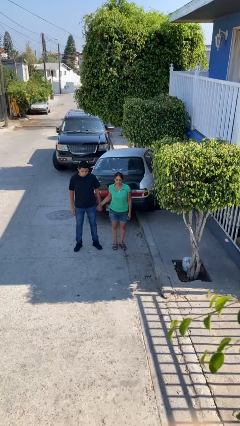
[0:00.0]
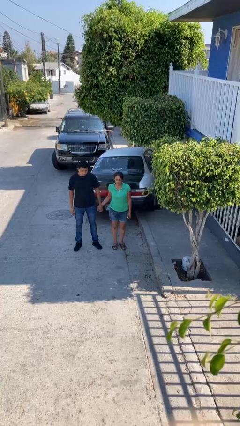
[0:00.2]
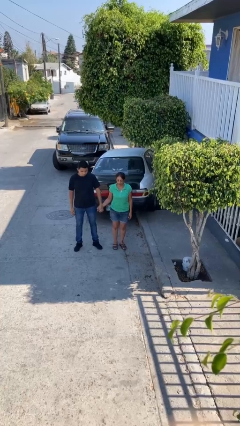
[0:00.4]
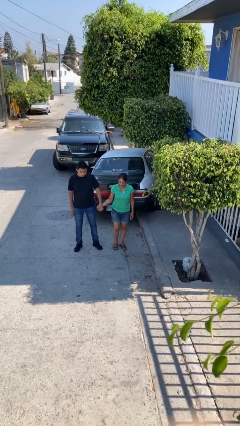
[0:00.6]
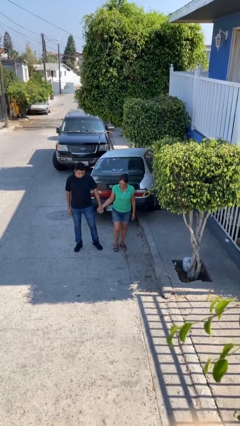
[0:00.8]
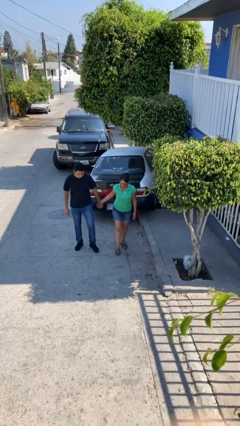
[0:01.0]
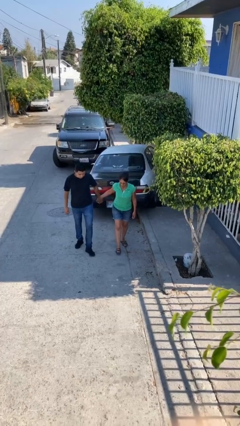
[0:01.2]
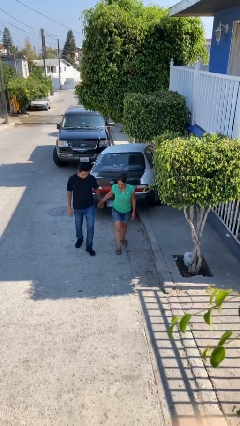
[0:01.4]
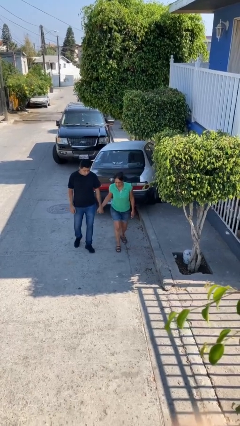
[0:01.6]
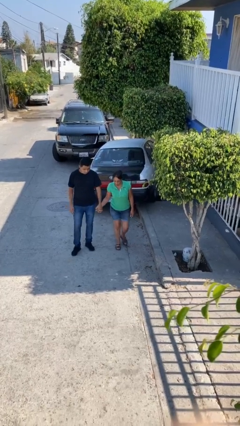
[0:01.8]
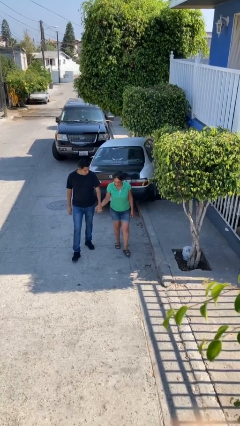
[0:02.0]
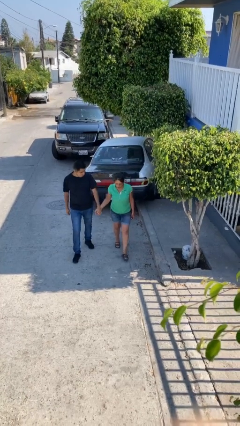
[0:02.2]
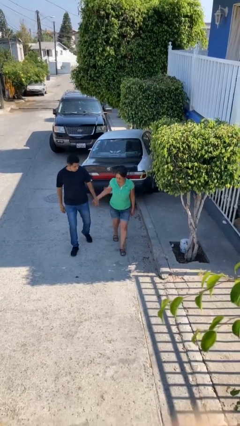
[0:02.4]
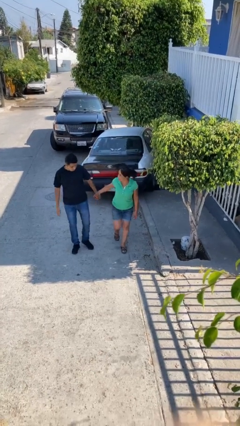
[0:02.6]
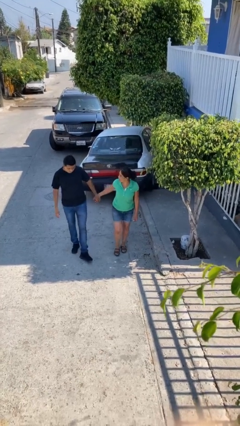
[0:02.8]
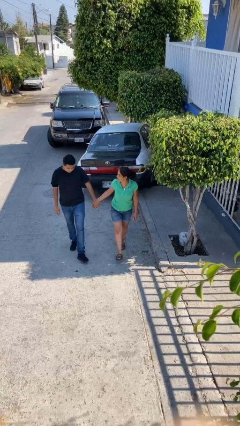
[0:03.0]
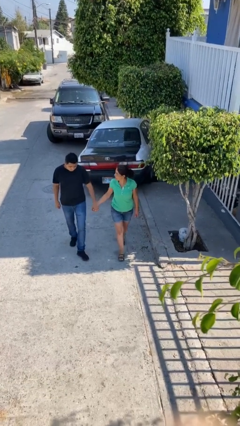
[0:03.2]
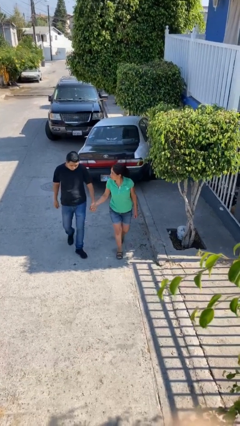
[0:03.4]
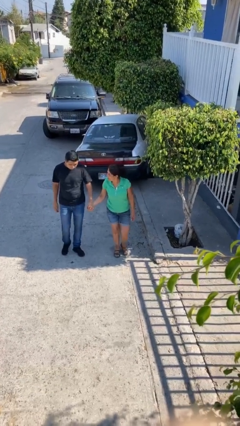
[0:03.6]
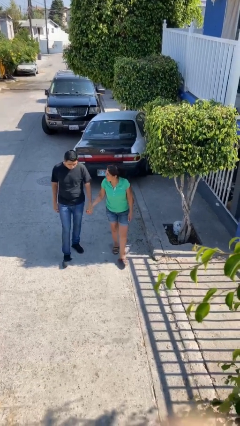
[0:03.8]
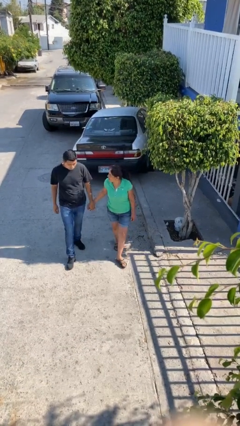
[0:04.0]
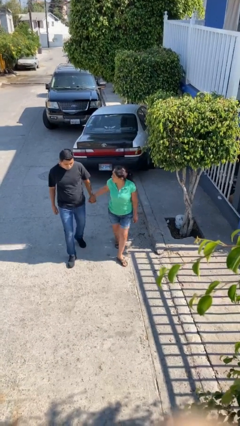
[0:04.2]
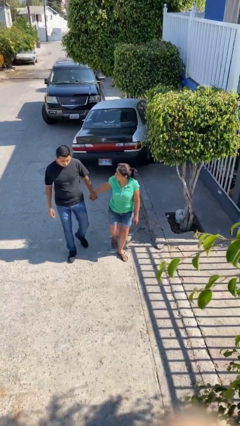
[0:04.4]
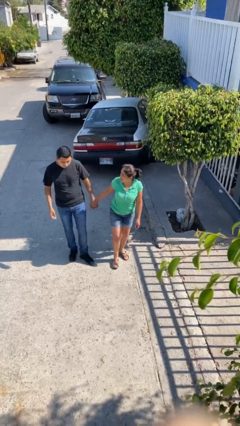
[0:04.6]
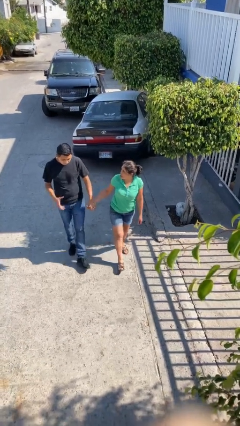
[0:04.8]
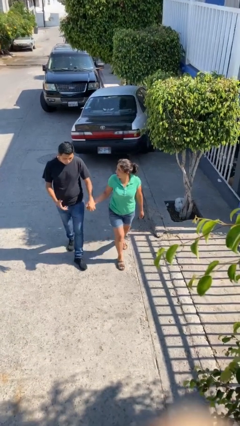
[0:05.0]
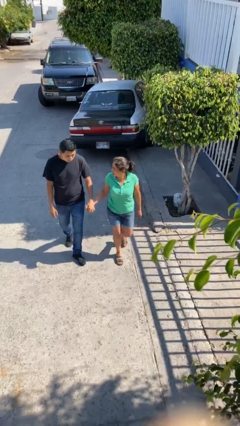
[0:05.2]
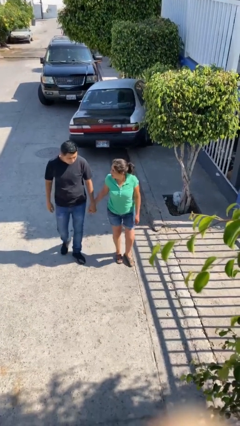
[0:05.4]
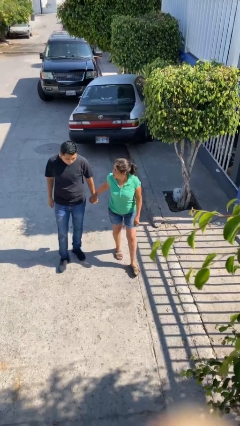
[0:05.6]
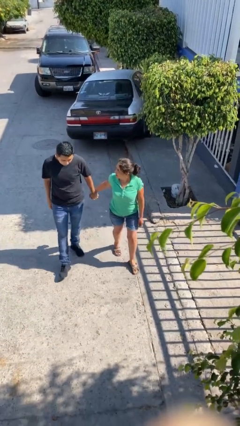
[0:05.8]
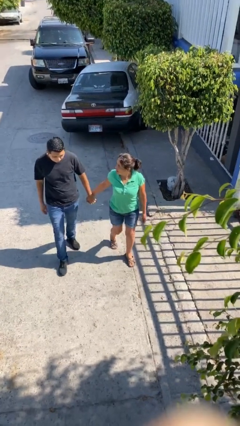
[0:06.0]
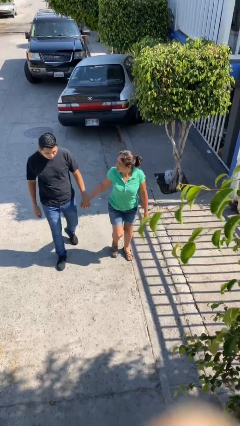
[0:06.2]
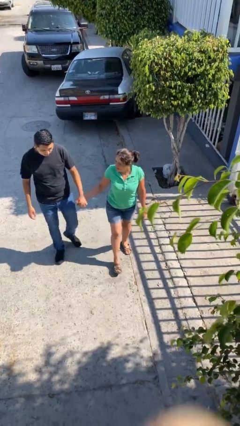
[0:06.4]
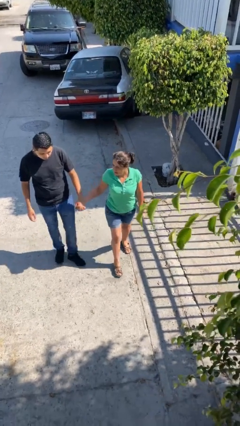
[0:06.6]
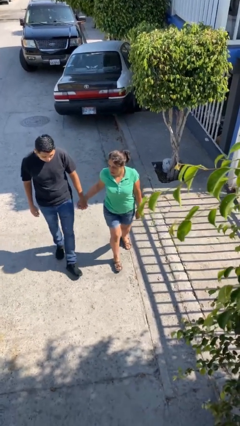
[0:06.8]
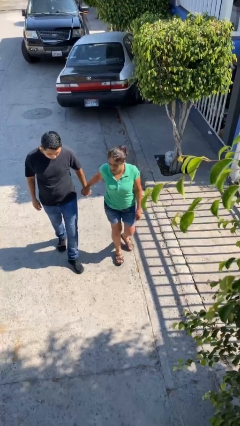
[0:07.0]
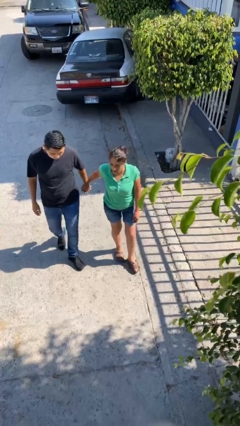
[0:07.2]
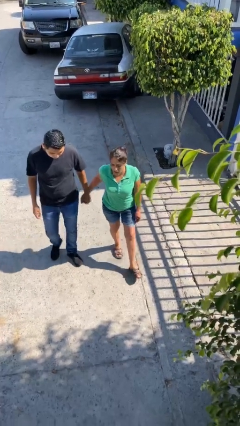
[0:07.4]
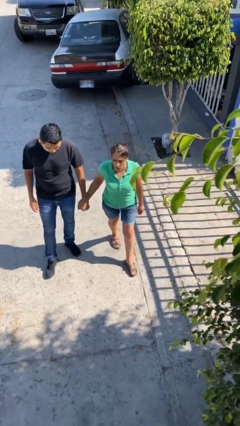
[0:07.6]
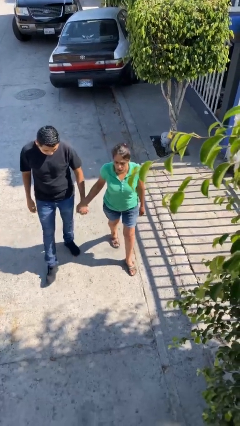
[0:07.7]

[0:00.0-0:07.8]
person holds hand

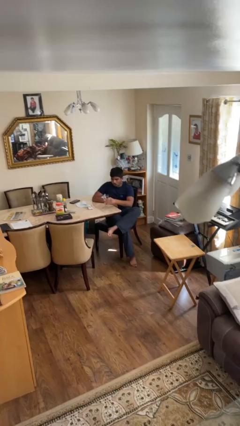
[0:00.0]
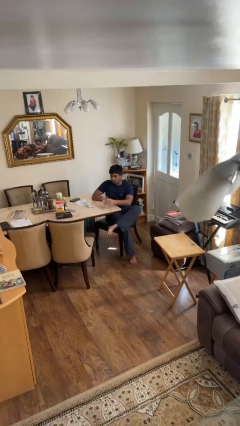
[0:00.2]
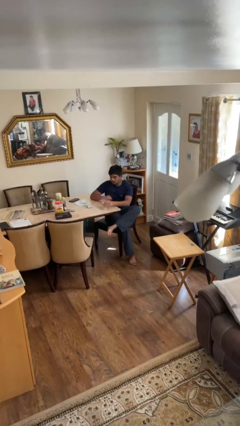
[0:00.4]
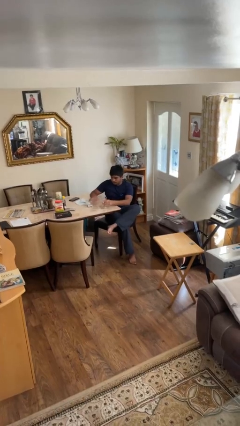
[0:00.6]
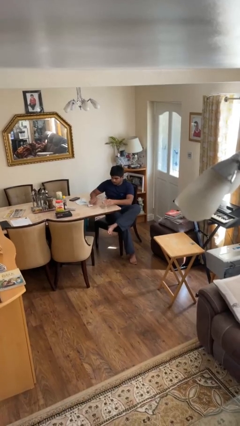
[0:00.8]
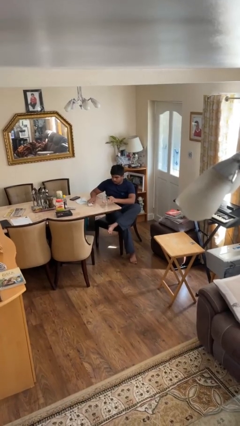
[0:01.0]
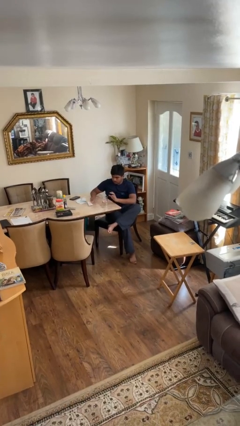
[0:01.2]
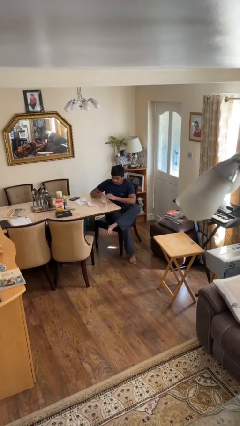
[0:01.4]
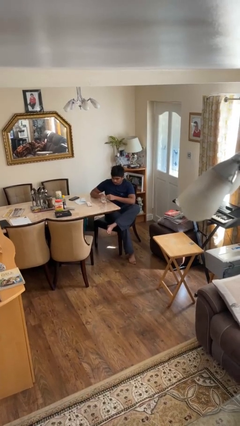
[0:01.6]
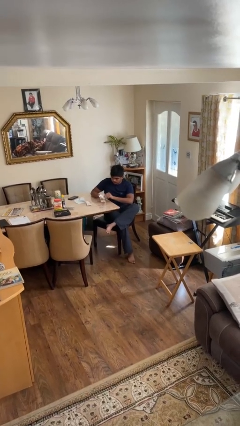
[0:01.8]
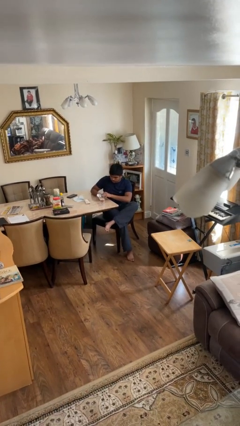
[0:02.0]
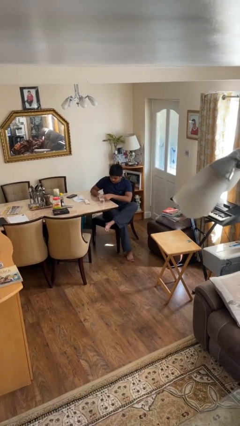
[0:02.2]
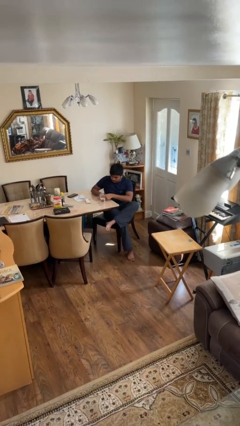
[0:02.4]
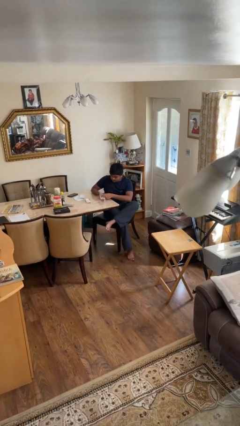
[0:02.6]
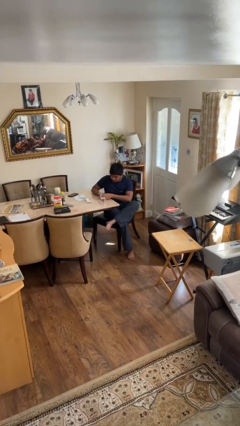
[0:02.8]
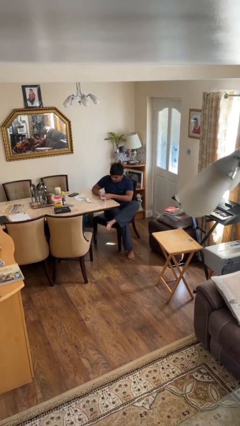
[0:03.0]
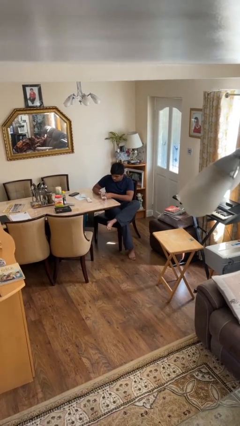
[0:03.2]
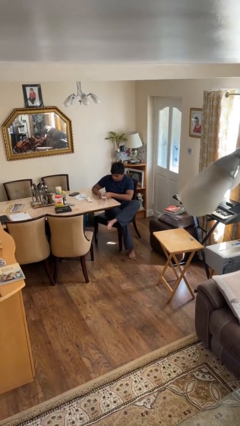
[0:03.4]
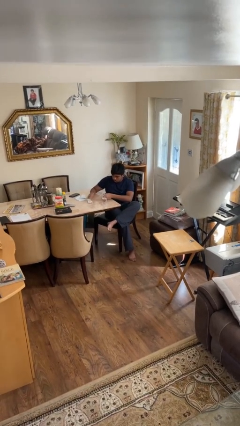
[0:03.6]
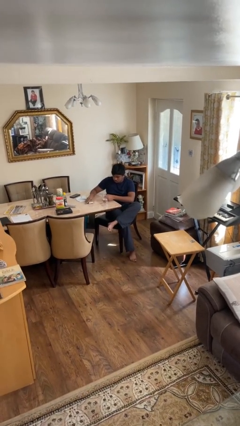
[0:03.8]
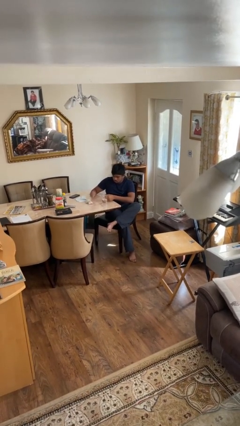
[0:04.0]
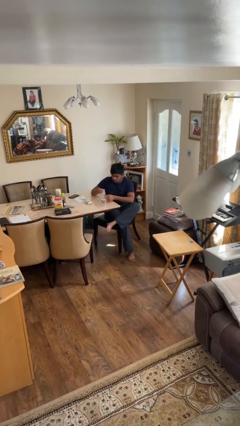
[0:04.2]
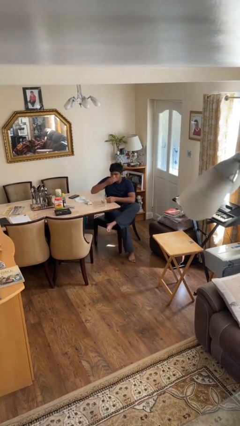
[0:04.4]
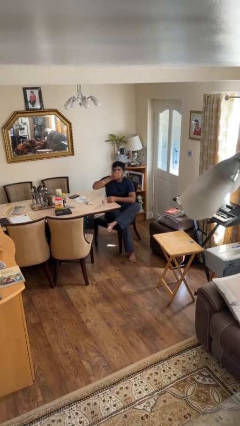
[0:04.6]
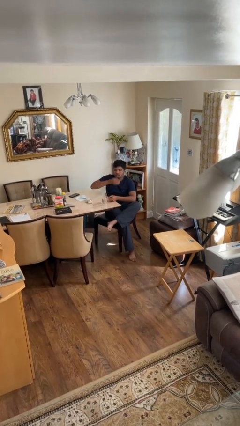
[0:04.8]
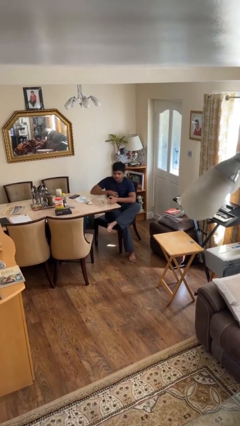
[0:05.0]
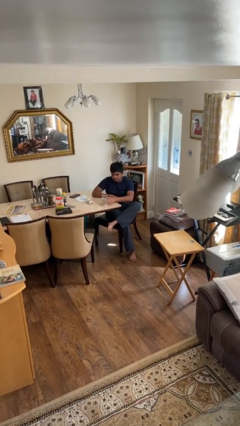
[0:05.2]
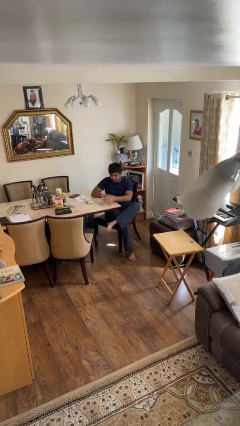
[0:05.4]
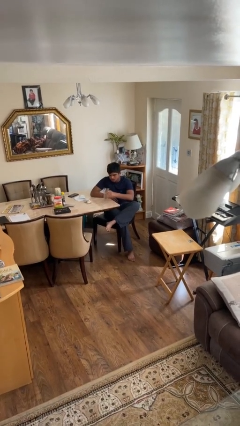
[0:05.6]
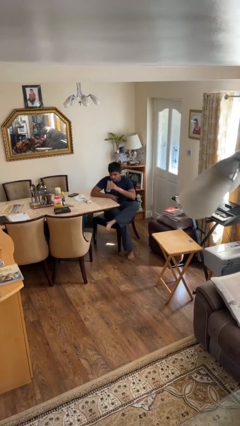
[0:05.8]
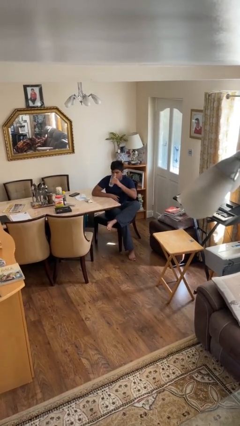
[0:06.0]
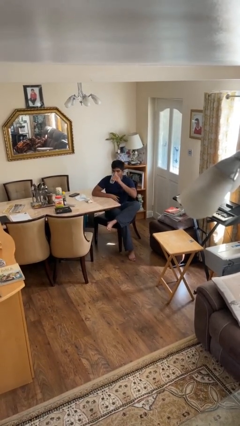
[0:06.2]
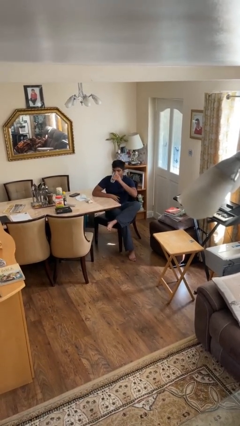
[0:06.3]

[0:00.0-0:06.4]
person takes medicine pills

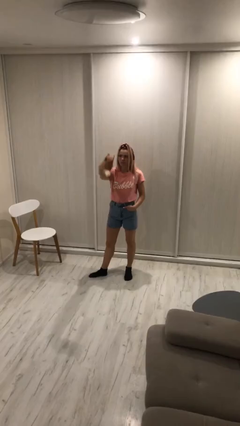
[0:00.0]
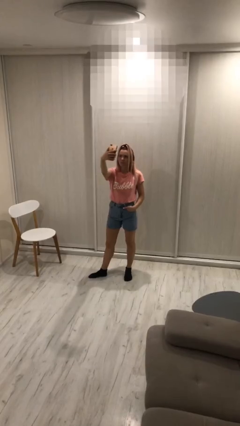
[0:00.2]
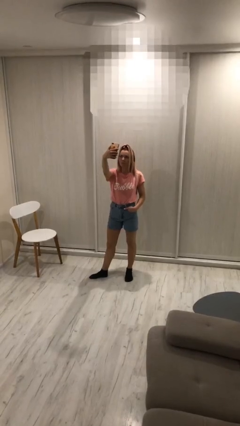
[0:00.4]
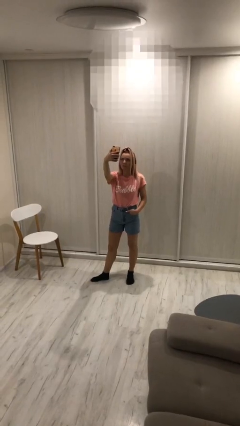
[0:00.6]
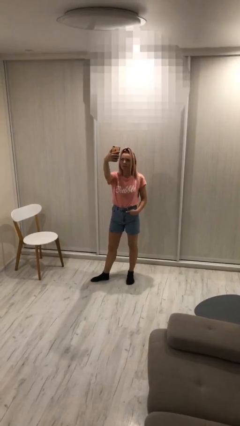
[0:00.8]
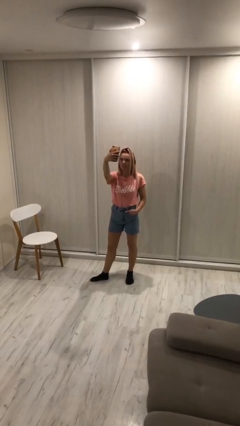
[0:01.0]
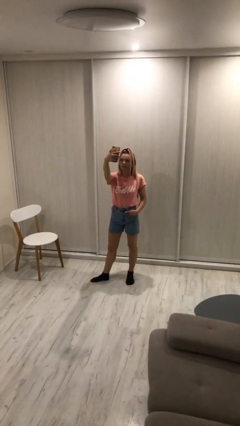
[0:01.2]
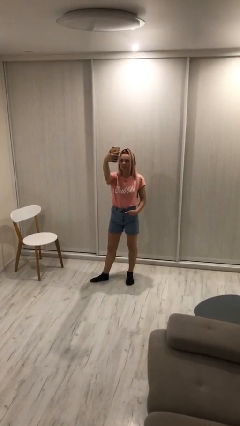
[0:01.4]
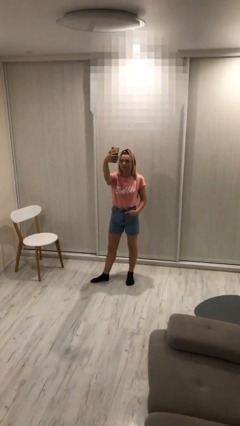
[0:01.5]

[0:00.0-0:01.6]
person takes selfie

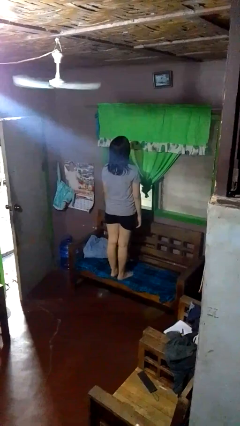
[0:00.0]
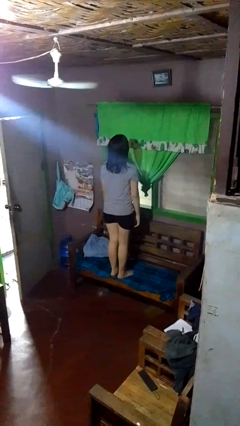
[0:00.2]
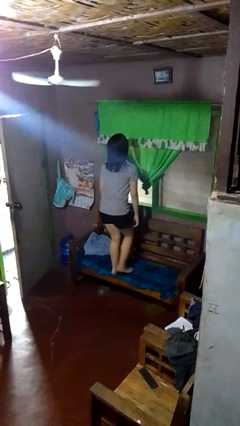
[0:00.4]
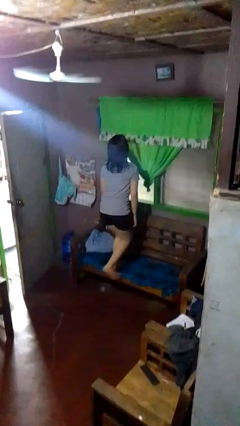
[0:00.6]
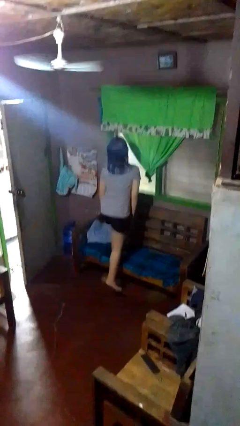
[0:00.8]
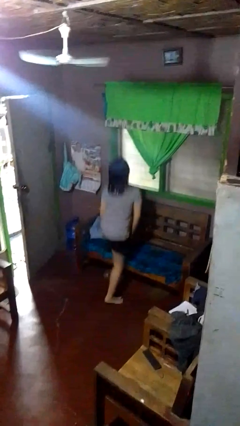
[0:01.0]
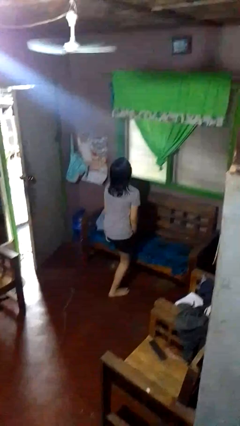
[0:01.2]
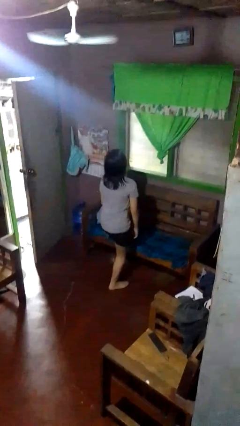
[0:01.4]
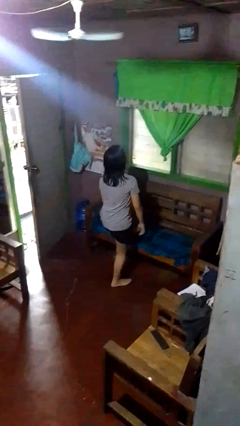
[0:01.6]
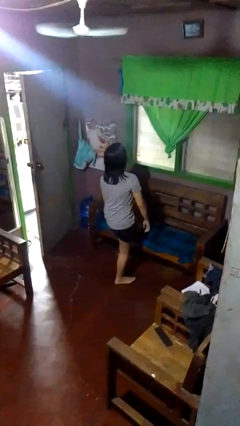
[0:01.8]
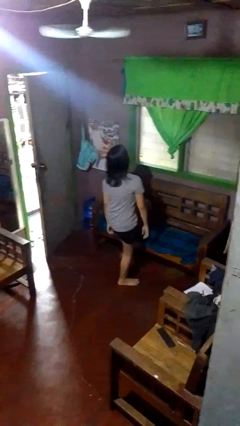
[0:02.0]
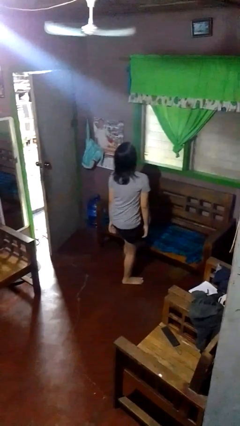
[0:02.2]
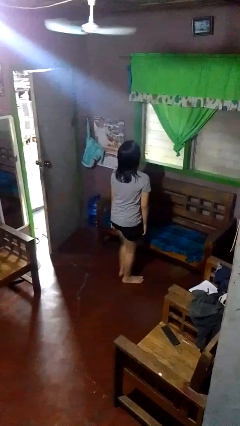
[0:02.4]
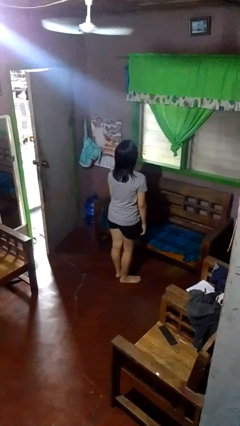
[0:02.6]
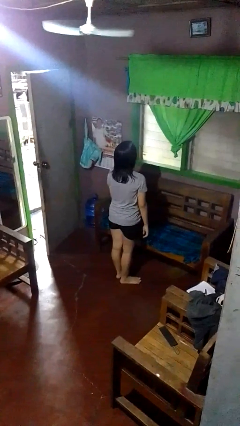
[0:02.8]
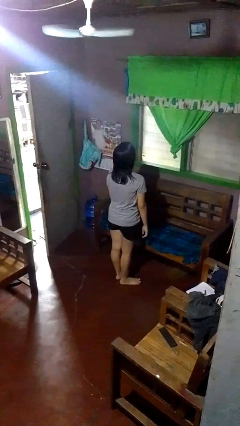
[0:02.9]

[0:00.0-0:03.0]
person climbs off couch
